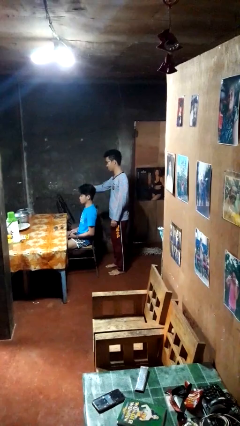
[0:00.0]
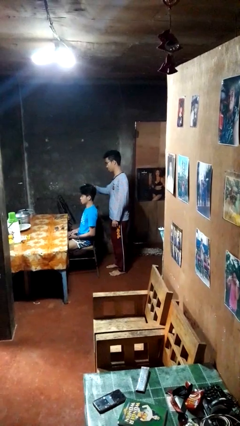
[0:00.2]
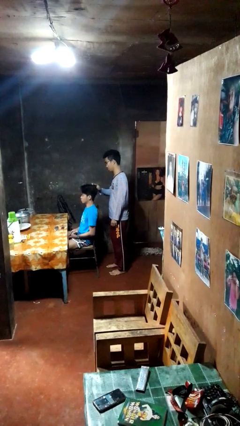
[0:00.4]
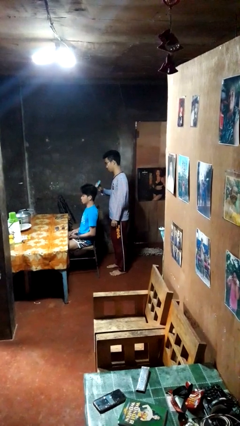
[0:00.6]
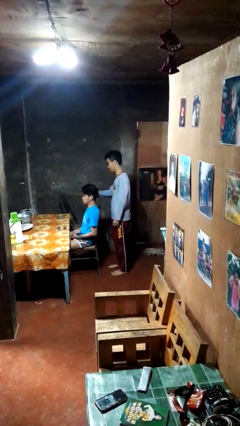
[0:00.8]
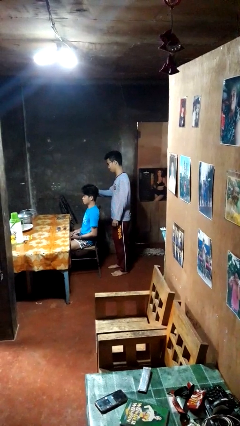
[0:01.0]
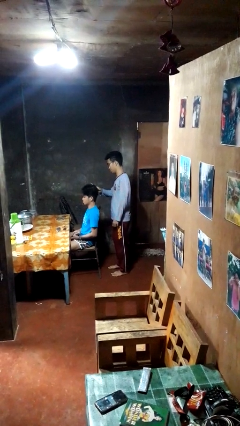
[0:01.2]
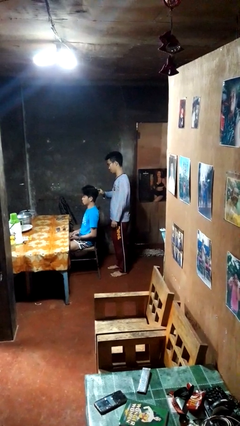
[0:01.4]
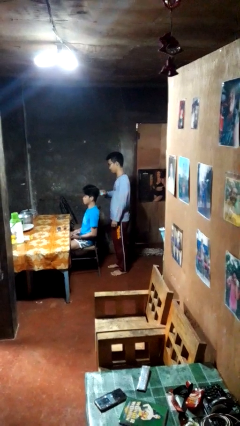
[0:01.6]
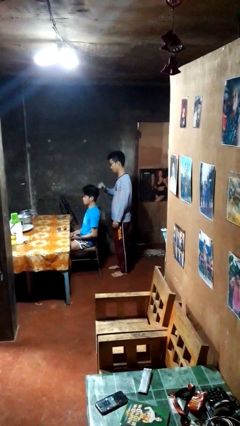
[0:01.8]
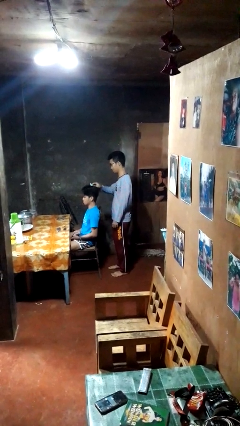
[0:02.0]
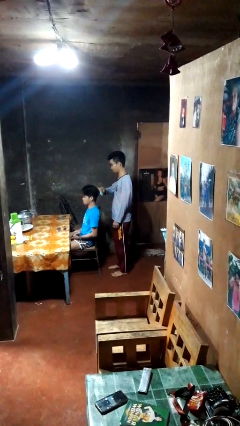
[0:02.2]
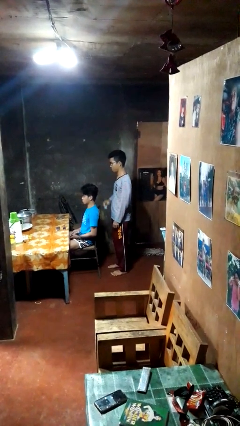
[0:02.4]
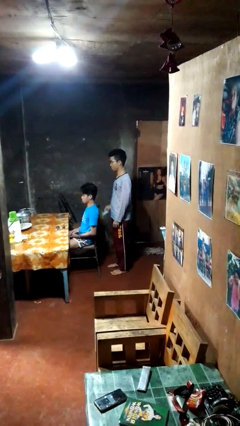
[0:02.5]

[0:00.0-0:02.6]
person brushes hair of person

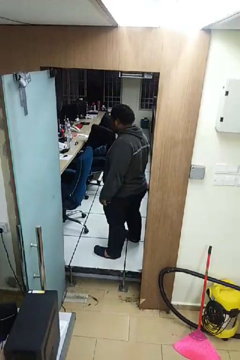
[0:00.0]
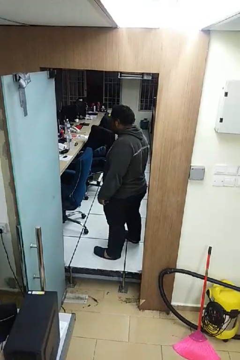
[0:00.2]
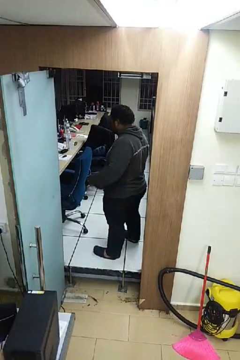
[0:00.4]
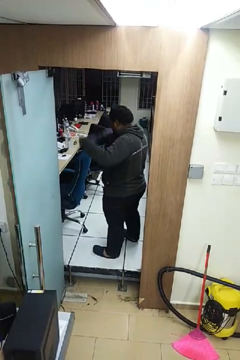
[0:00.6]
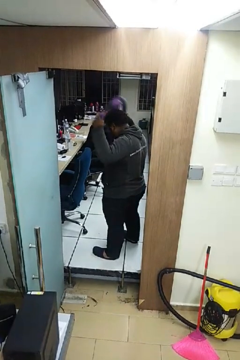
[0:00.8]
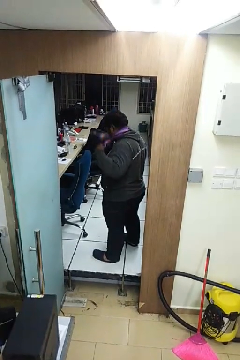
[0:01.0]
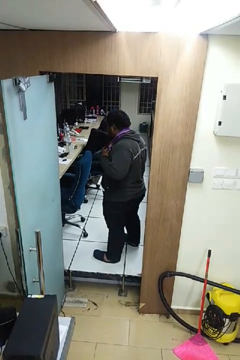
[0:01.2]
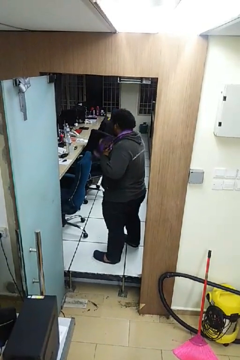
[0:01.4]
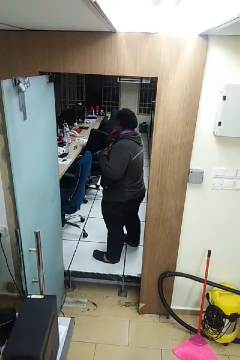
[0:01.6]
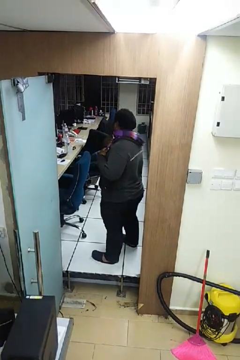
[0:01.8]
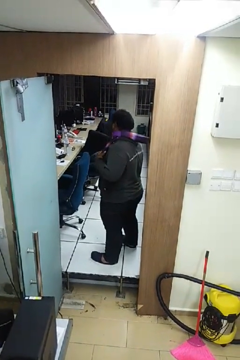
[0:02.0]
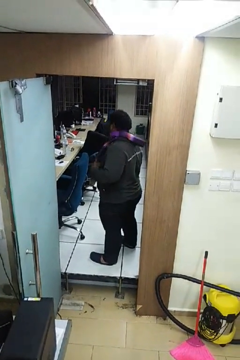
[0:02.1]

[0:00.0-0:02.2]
person puts on scarf

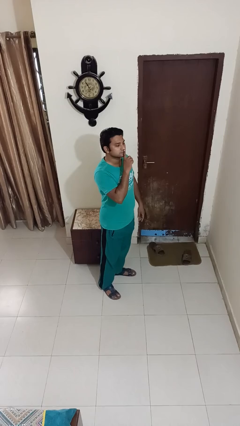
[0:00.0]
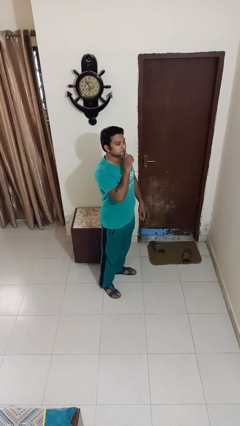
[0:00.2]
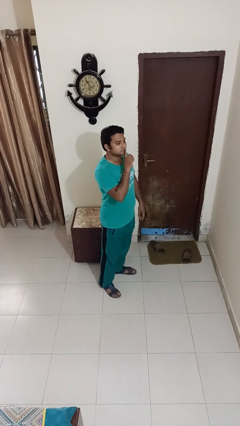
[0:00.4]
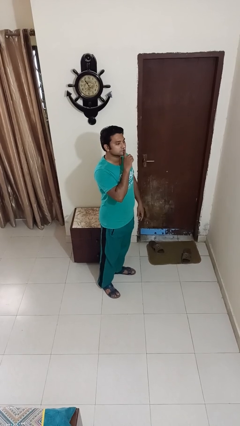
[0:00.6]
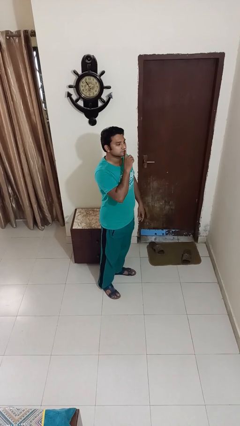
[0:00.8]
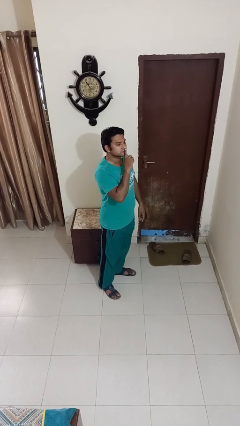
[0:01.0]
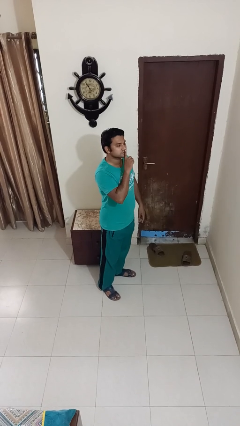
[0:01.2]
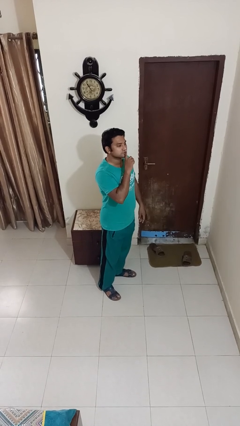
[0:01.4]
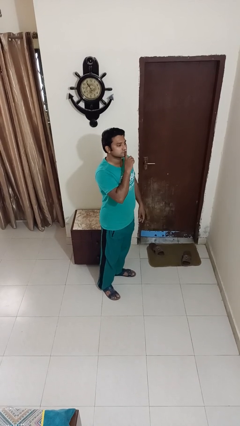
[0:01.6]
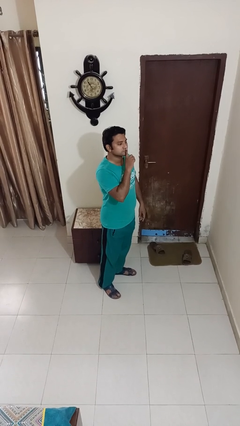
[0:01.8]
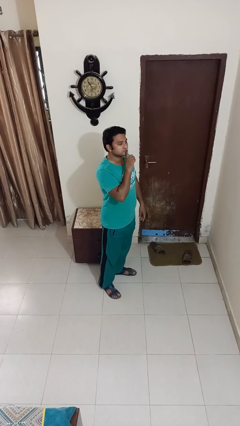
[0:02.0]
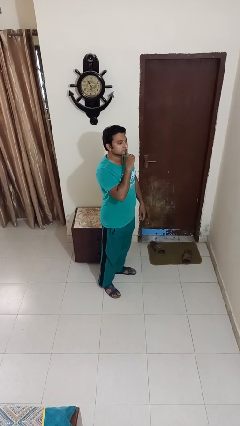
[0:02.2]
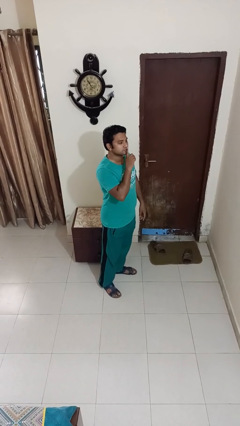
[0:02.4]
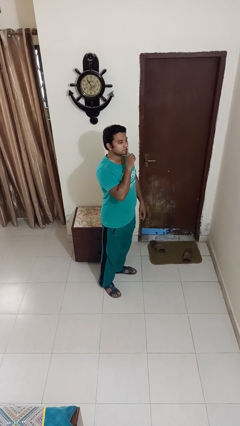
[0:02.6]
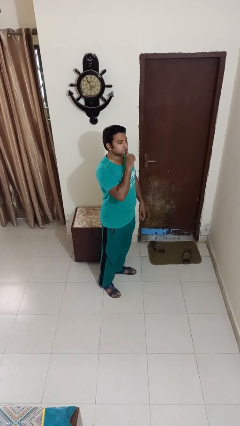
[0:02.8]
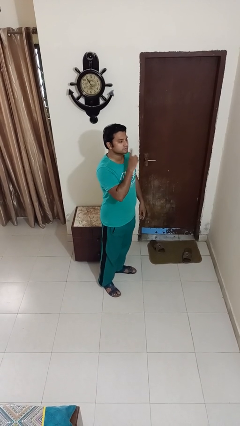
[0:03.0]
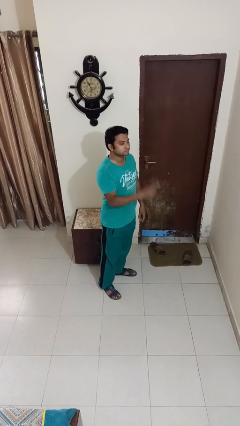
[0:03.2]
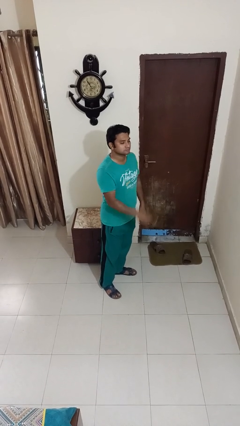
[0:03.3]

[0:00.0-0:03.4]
person gestures be quiet

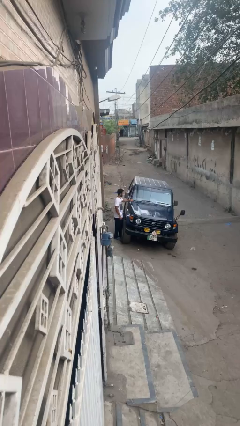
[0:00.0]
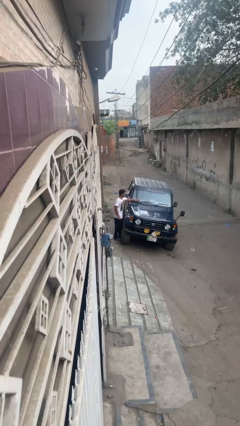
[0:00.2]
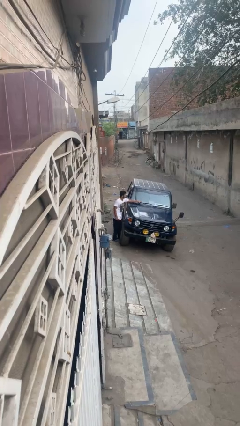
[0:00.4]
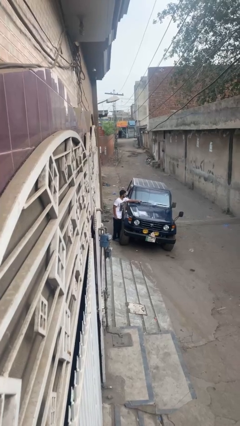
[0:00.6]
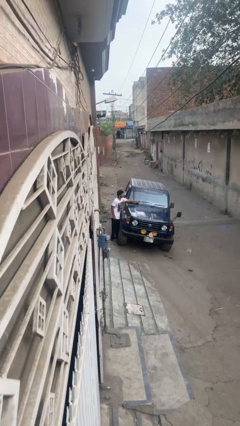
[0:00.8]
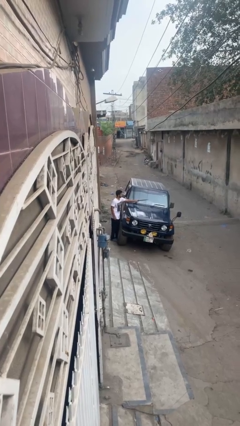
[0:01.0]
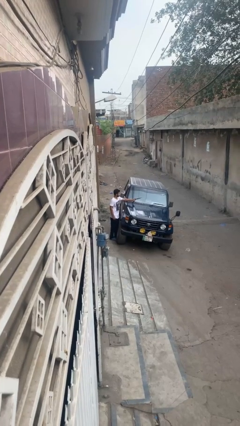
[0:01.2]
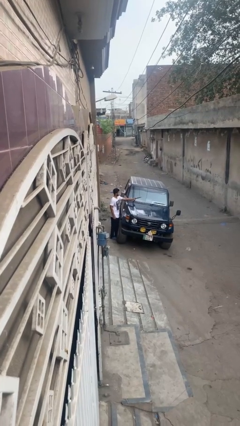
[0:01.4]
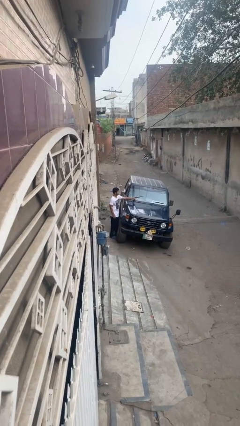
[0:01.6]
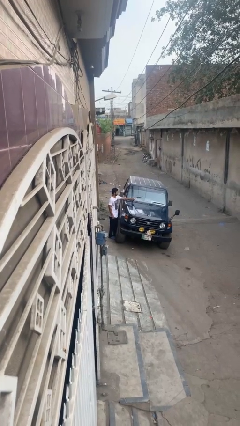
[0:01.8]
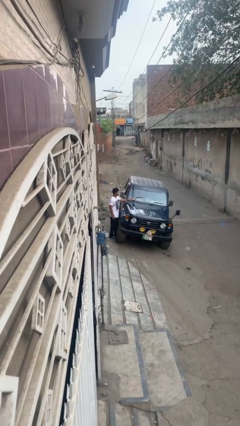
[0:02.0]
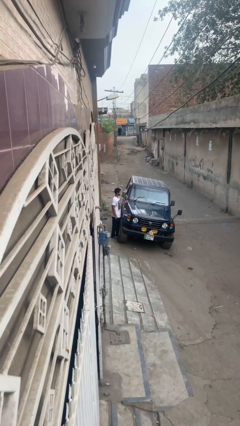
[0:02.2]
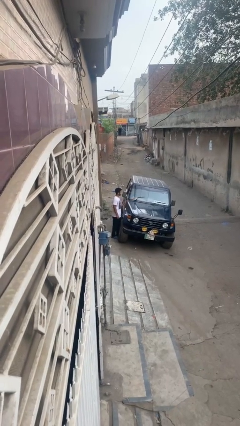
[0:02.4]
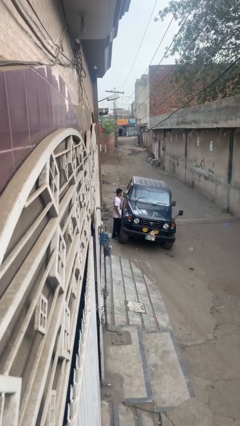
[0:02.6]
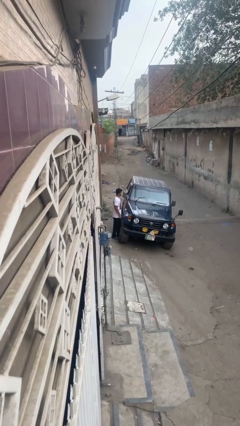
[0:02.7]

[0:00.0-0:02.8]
person flips up car wipers

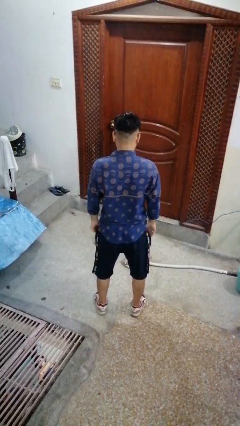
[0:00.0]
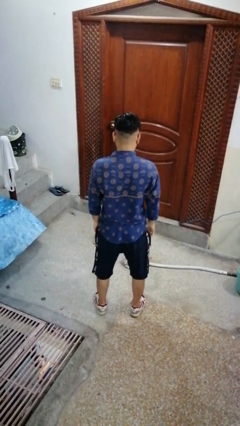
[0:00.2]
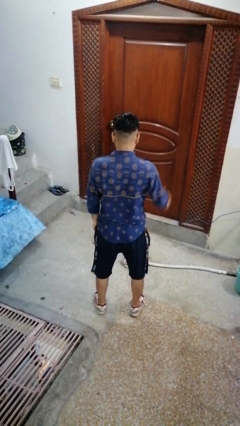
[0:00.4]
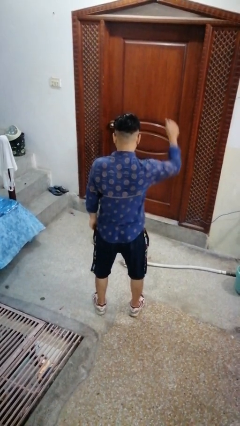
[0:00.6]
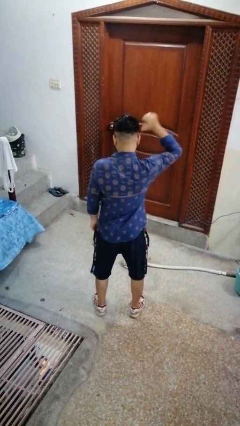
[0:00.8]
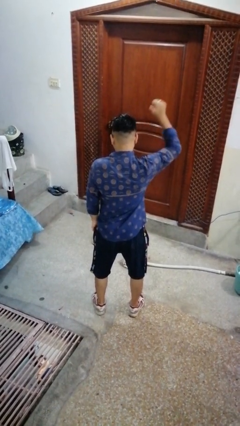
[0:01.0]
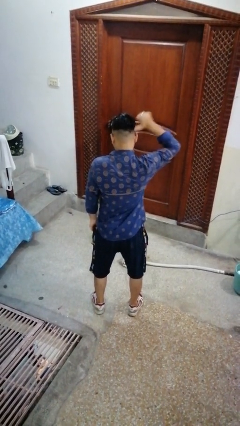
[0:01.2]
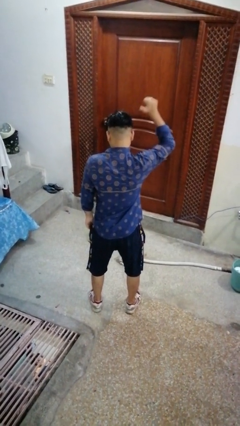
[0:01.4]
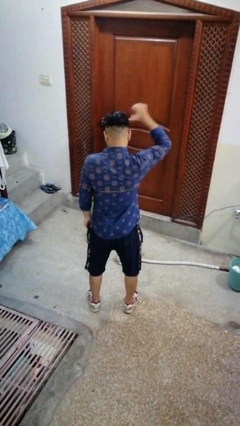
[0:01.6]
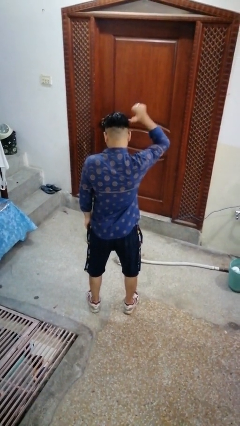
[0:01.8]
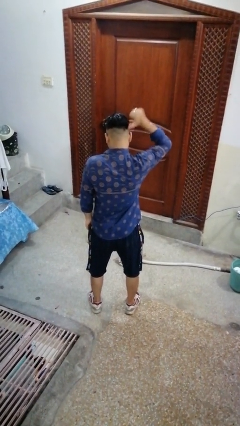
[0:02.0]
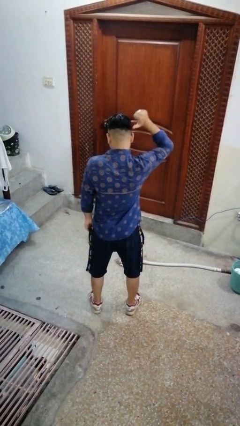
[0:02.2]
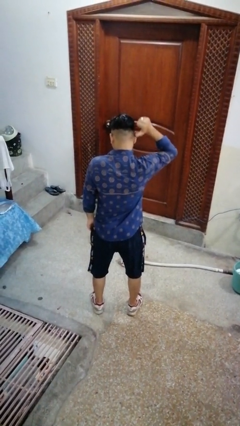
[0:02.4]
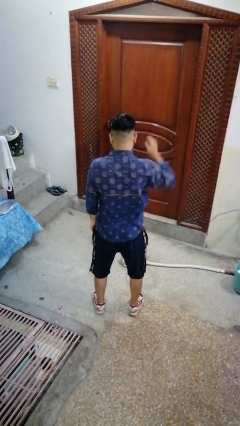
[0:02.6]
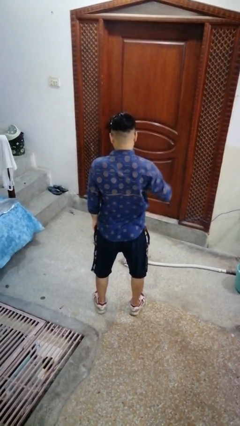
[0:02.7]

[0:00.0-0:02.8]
person gestures behind me

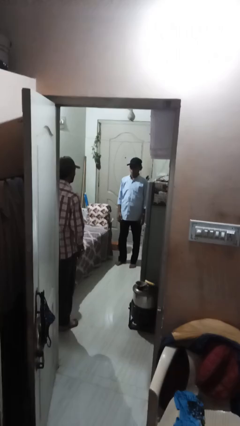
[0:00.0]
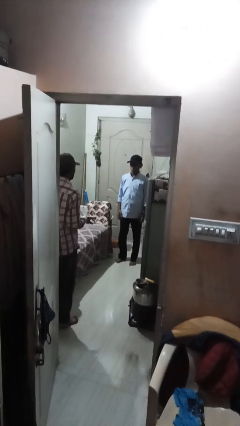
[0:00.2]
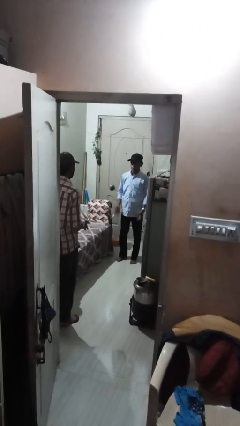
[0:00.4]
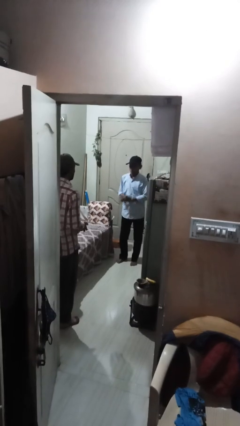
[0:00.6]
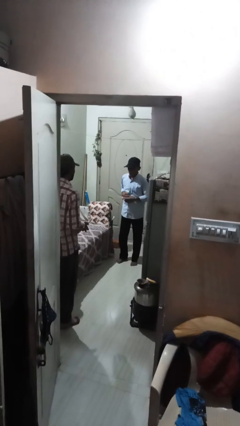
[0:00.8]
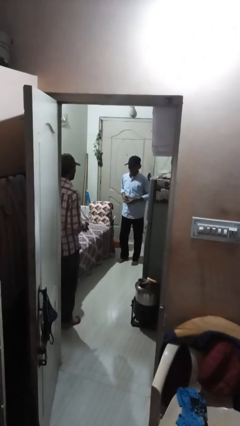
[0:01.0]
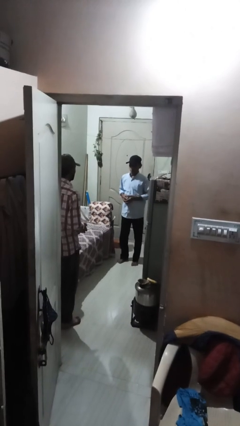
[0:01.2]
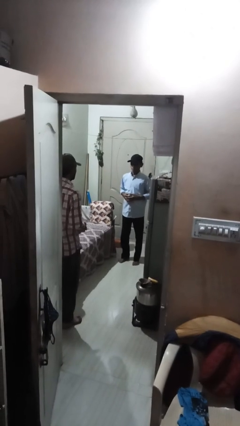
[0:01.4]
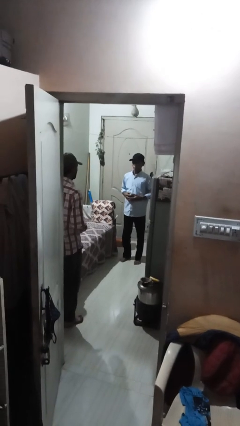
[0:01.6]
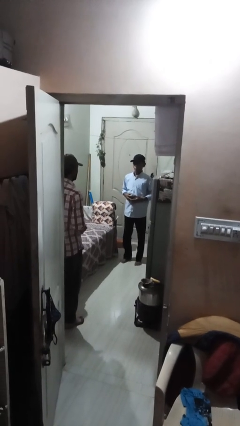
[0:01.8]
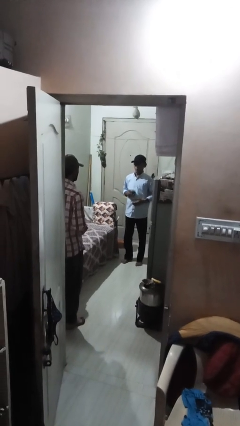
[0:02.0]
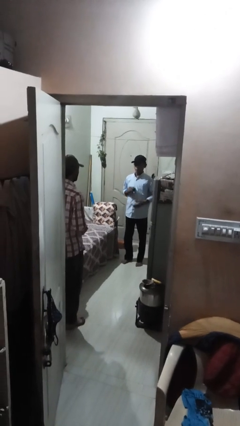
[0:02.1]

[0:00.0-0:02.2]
person catches object from person

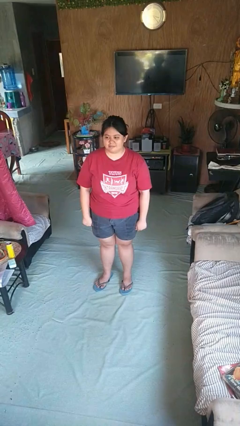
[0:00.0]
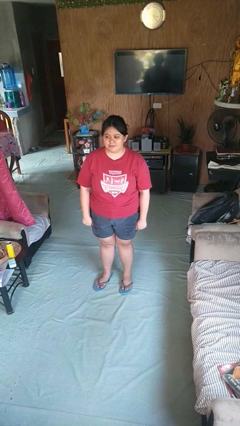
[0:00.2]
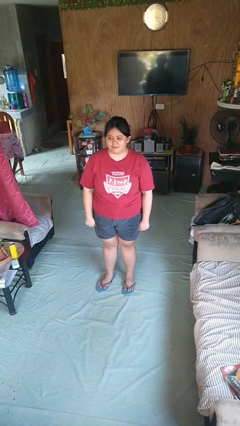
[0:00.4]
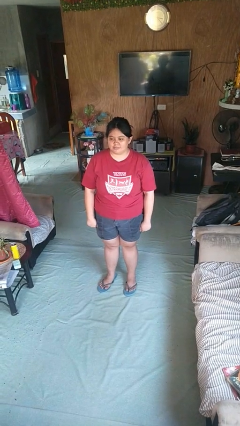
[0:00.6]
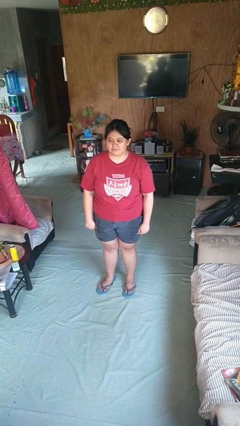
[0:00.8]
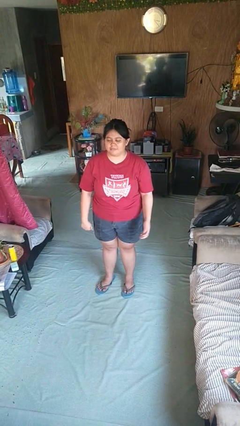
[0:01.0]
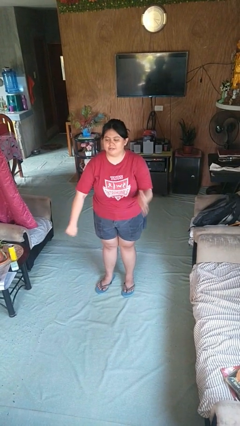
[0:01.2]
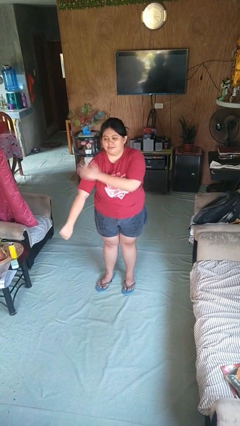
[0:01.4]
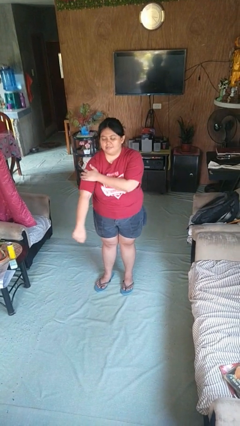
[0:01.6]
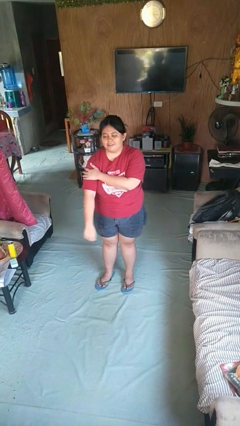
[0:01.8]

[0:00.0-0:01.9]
person swats bug
